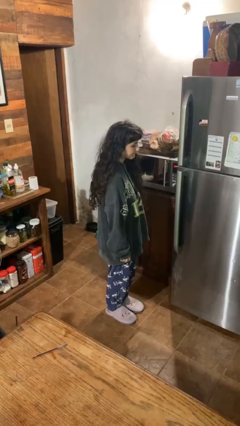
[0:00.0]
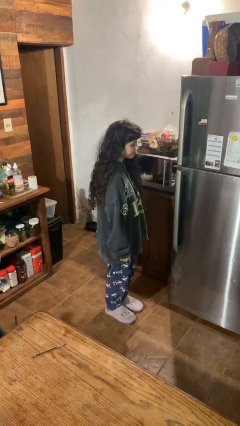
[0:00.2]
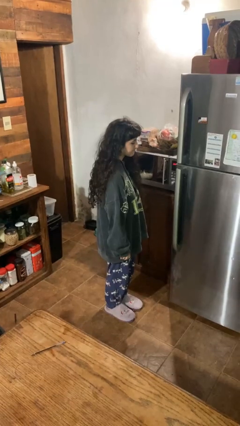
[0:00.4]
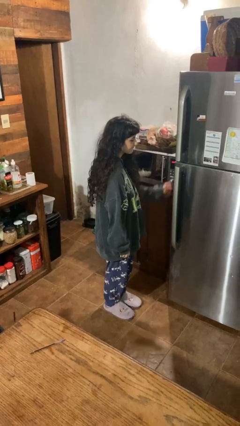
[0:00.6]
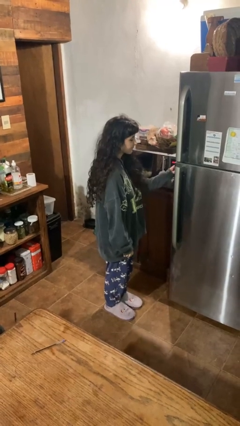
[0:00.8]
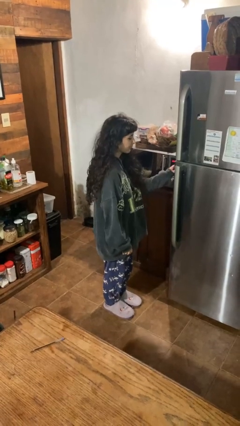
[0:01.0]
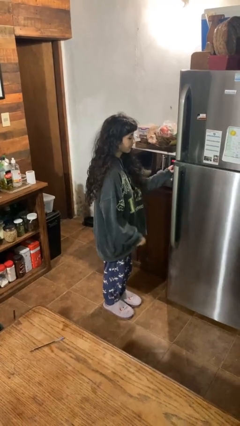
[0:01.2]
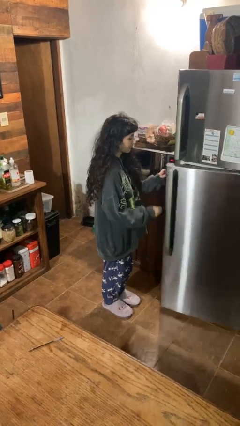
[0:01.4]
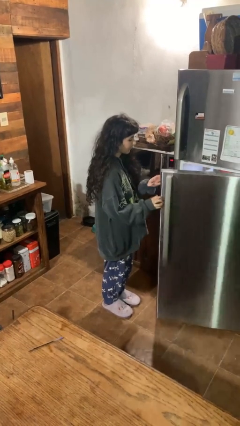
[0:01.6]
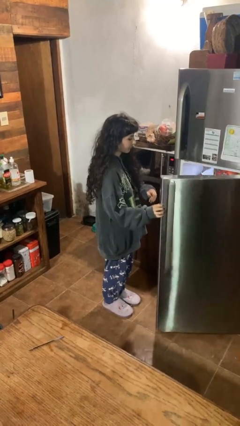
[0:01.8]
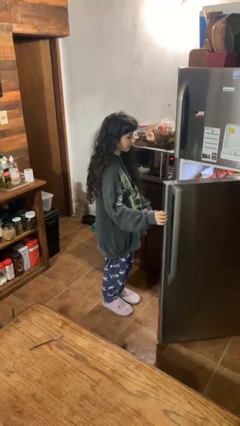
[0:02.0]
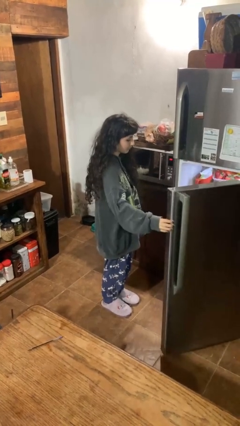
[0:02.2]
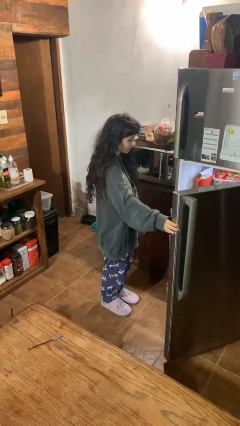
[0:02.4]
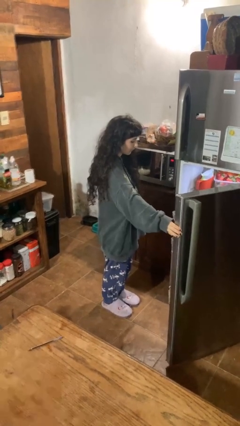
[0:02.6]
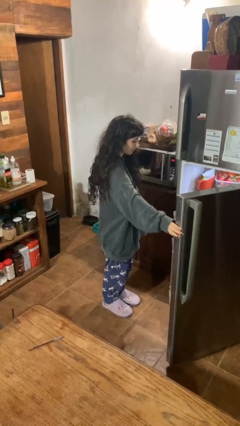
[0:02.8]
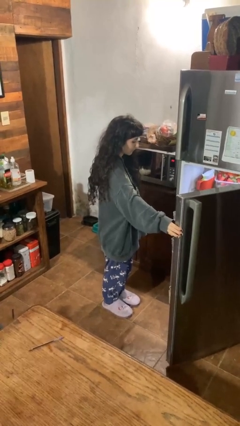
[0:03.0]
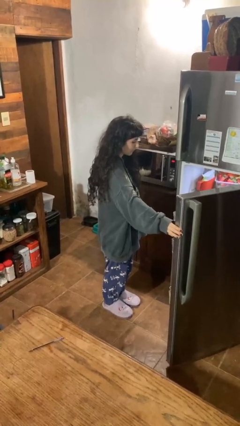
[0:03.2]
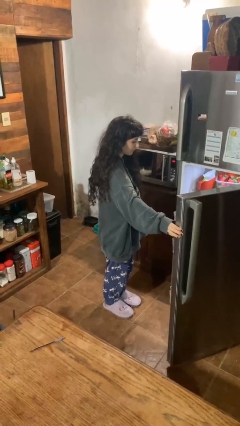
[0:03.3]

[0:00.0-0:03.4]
person opens refrigerator

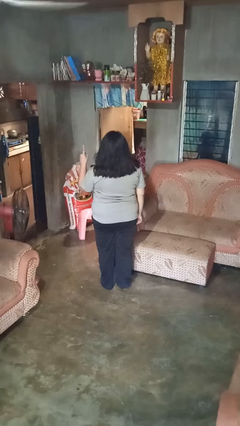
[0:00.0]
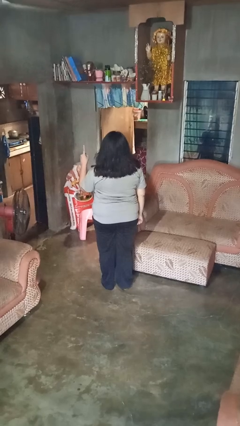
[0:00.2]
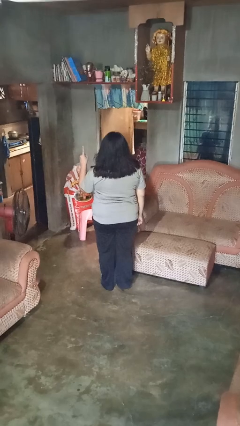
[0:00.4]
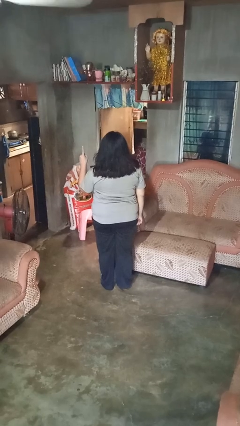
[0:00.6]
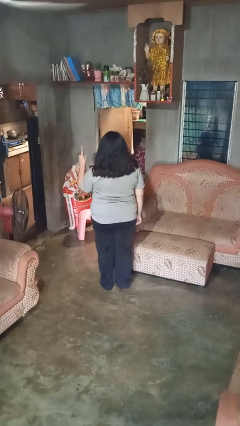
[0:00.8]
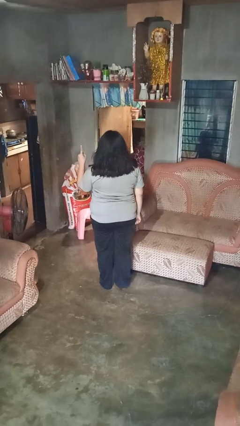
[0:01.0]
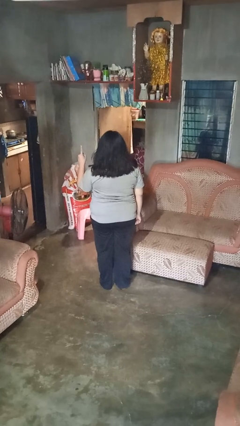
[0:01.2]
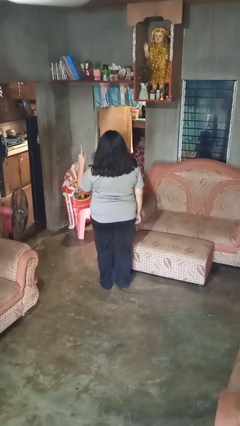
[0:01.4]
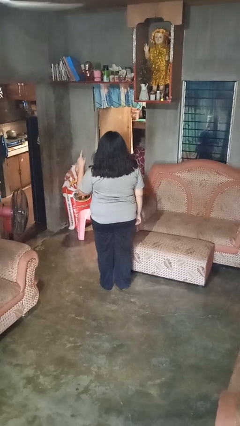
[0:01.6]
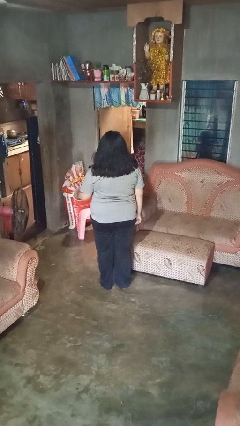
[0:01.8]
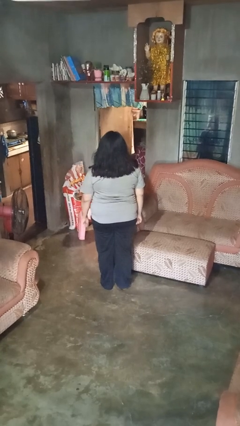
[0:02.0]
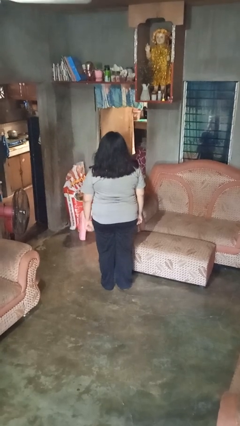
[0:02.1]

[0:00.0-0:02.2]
person gestures number one

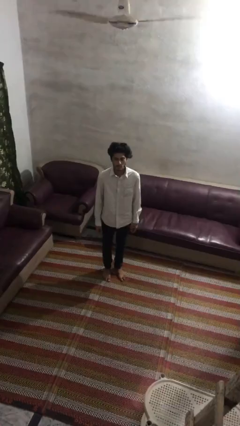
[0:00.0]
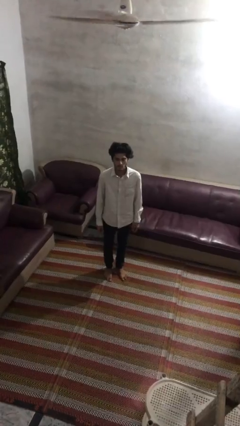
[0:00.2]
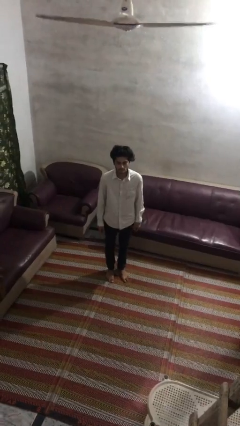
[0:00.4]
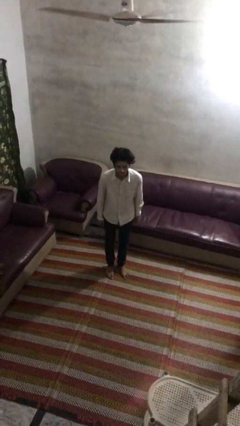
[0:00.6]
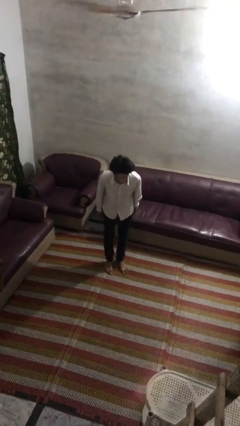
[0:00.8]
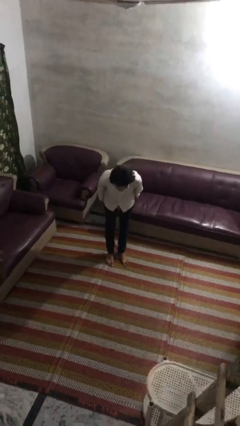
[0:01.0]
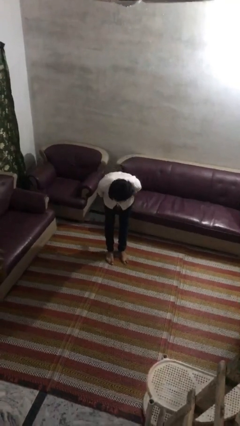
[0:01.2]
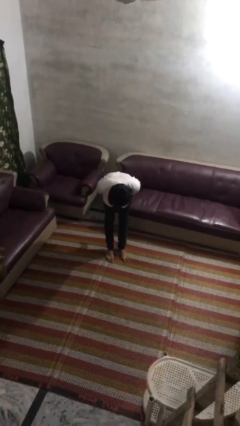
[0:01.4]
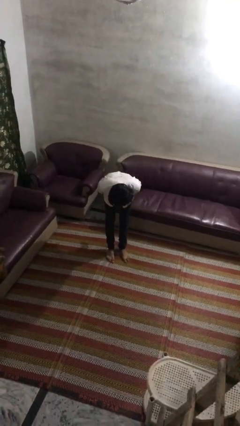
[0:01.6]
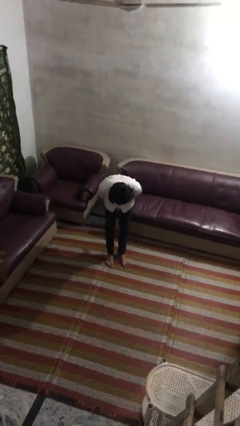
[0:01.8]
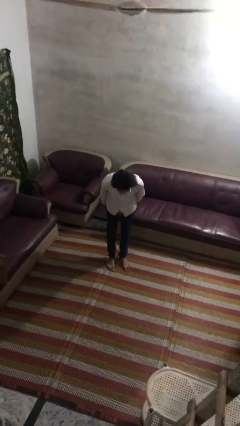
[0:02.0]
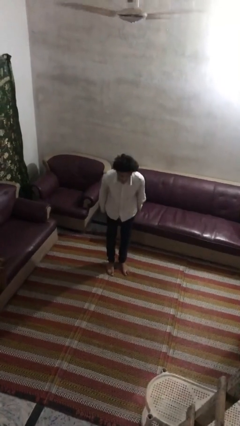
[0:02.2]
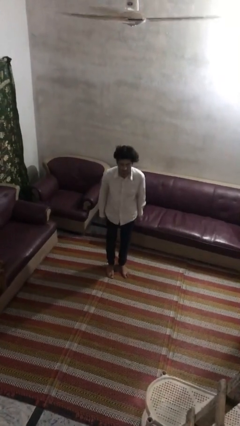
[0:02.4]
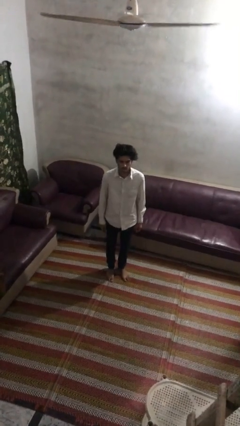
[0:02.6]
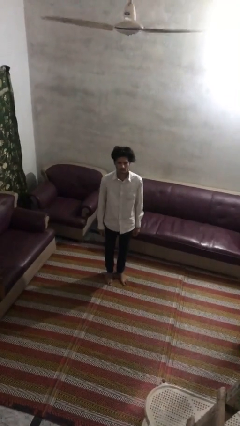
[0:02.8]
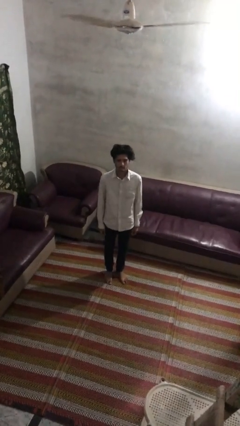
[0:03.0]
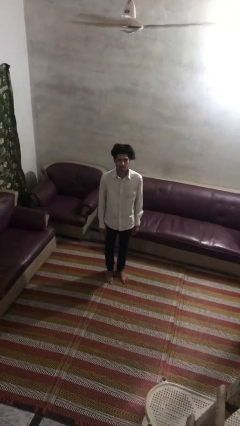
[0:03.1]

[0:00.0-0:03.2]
person bows

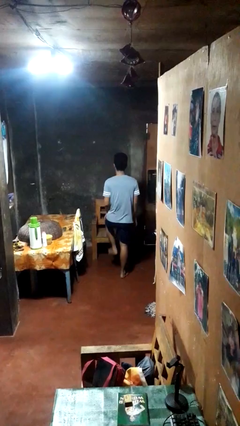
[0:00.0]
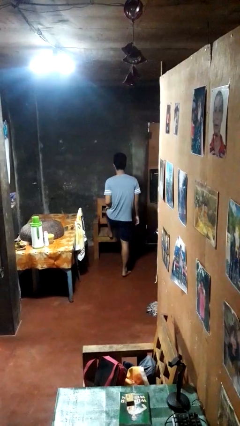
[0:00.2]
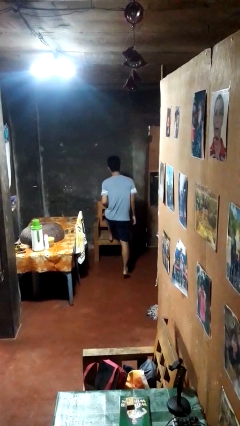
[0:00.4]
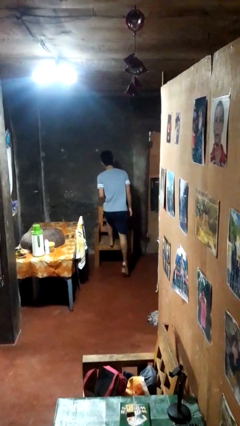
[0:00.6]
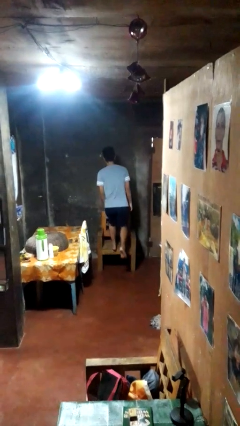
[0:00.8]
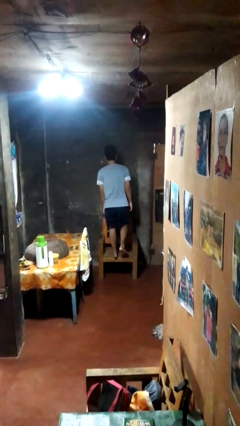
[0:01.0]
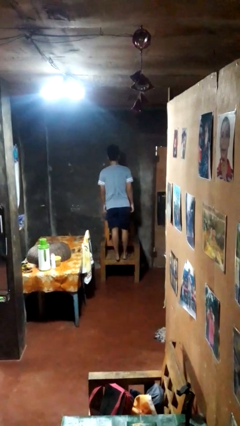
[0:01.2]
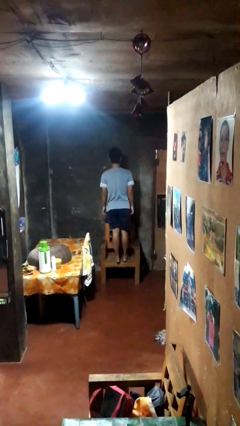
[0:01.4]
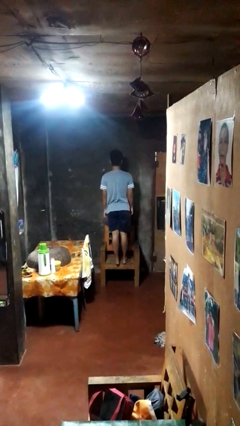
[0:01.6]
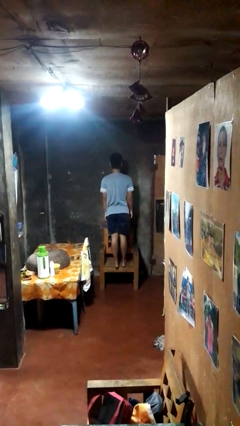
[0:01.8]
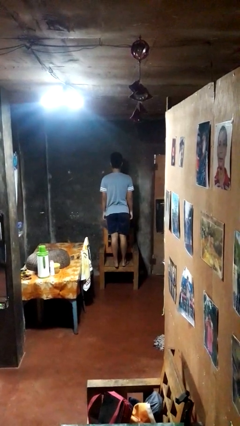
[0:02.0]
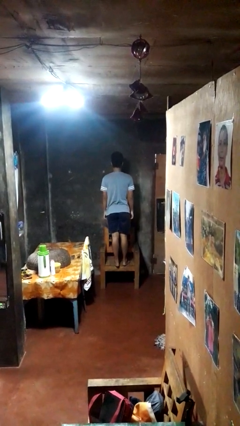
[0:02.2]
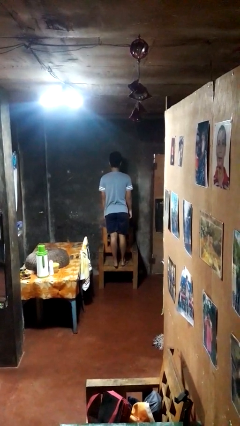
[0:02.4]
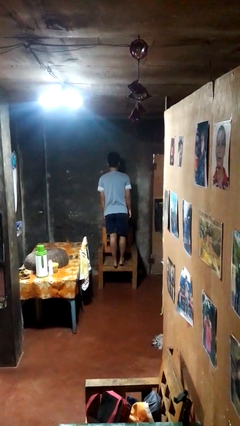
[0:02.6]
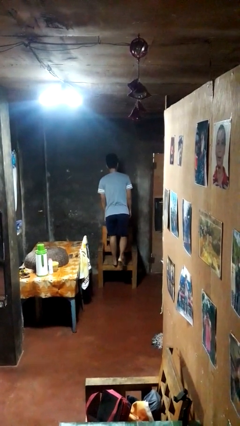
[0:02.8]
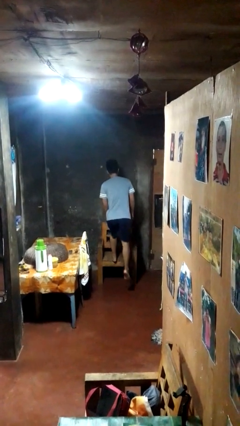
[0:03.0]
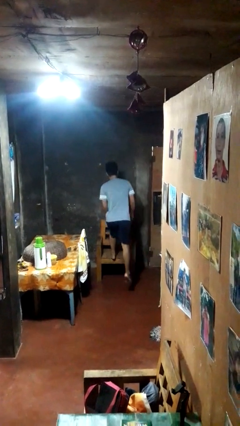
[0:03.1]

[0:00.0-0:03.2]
person climbs on chair

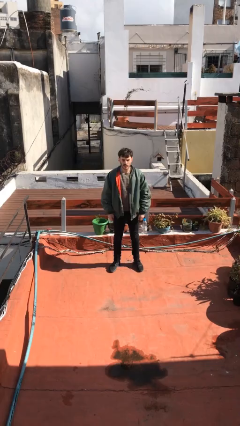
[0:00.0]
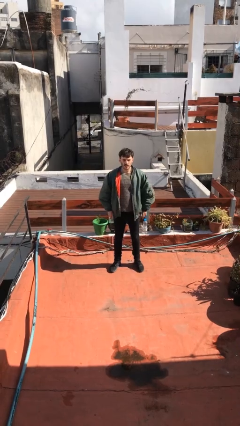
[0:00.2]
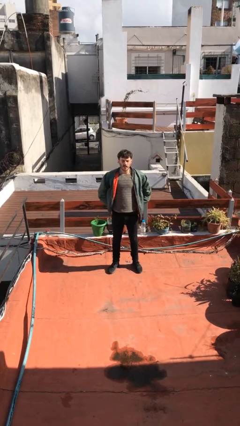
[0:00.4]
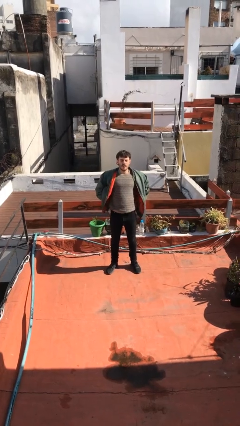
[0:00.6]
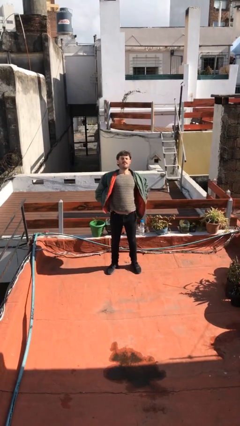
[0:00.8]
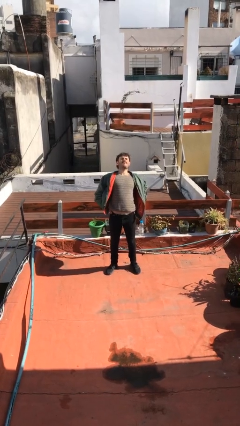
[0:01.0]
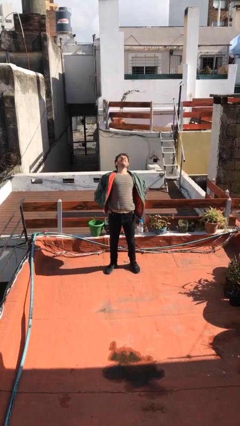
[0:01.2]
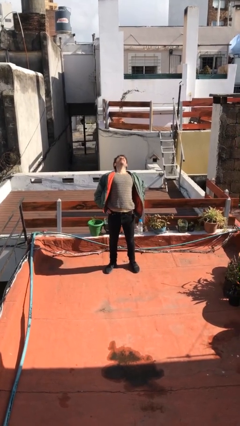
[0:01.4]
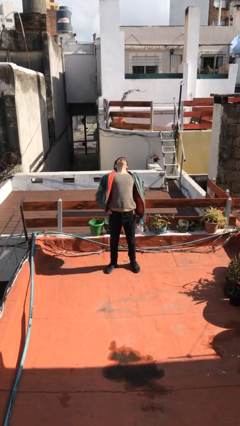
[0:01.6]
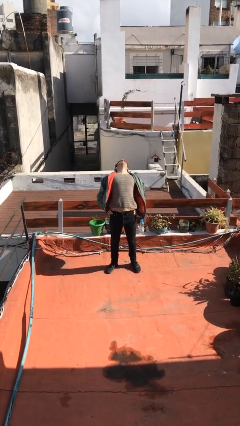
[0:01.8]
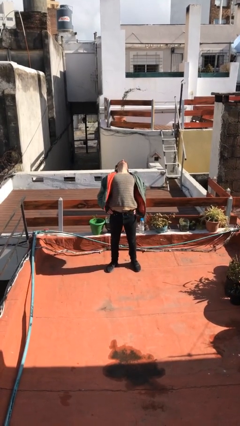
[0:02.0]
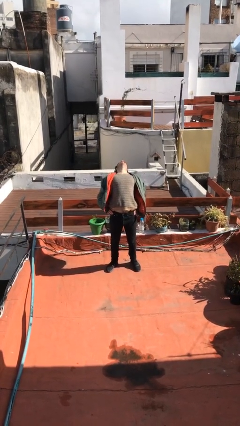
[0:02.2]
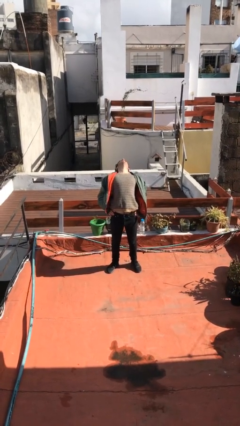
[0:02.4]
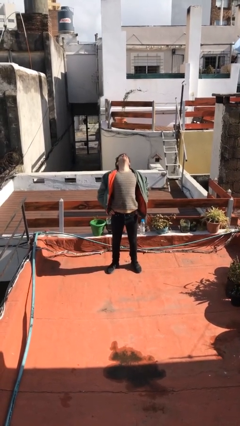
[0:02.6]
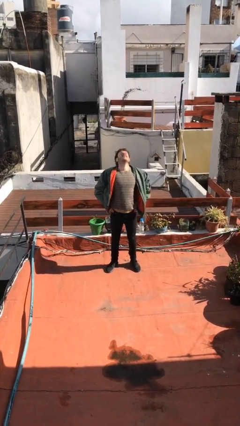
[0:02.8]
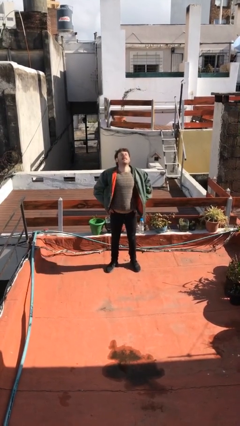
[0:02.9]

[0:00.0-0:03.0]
person stretches back

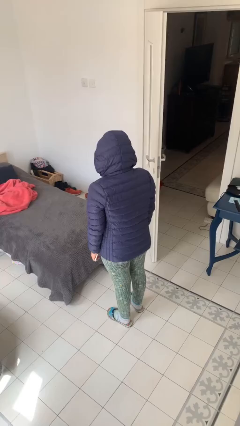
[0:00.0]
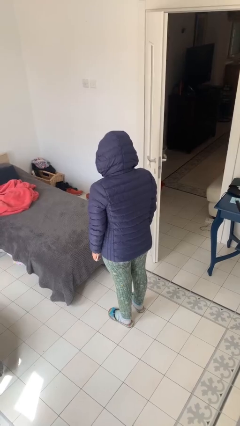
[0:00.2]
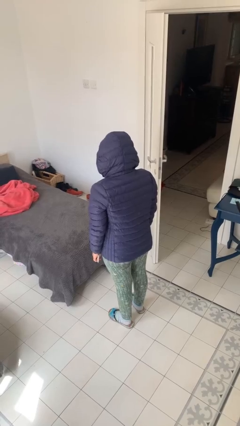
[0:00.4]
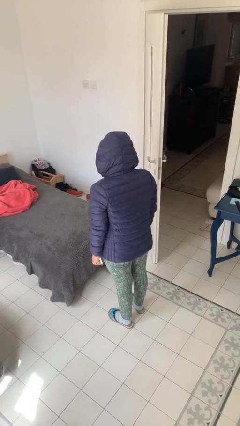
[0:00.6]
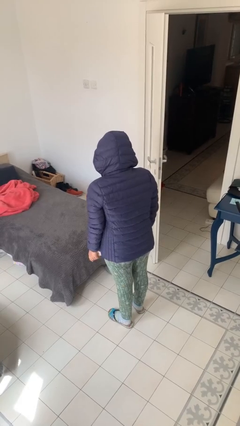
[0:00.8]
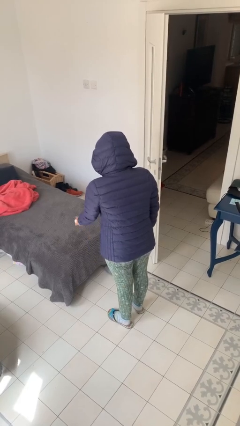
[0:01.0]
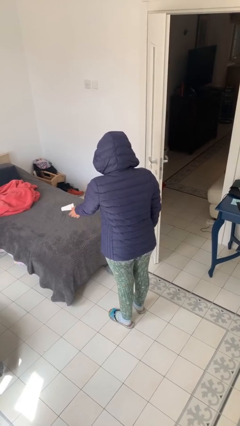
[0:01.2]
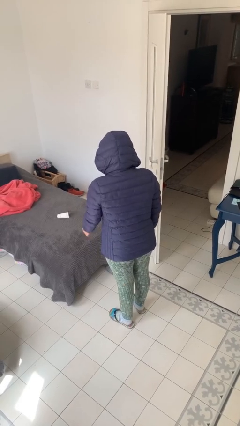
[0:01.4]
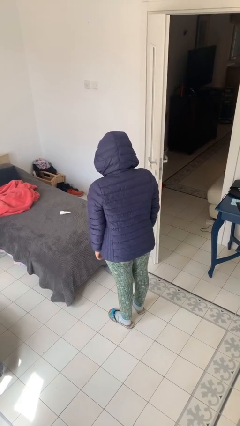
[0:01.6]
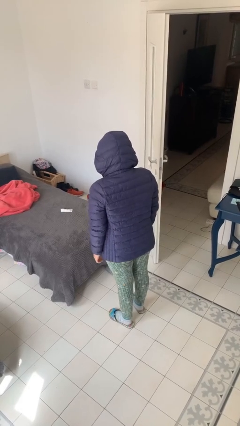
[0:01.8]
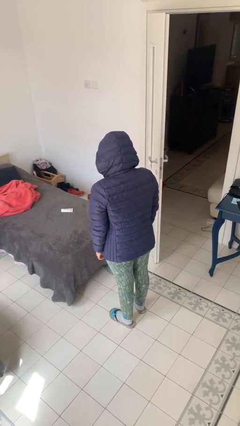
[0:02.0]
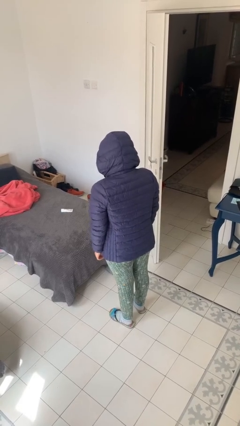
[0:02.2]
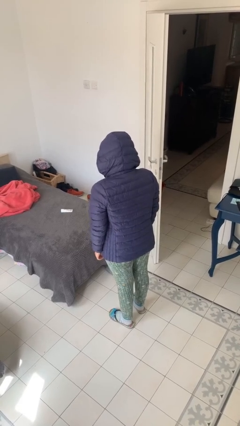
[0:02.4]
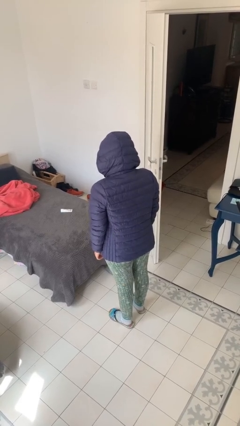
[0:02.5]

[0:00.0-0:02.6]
person throws object on bed
